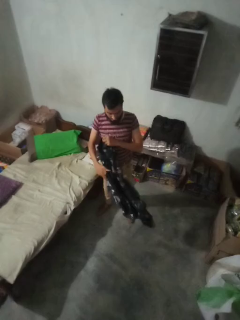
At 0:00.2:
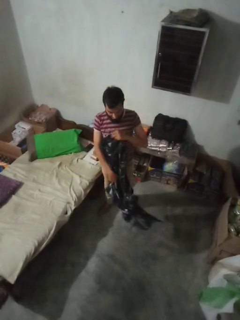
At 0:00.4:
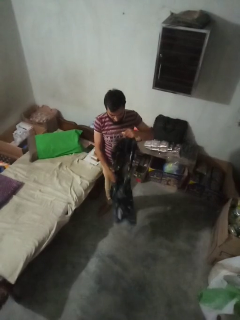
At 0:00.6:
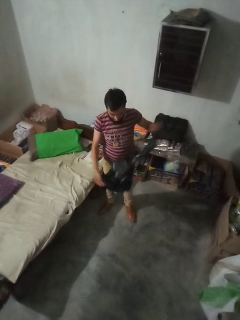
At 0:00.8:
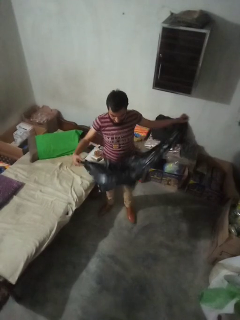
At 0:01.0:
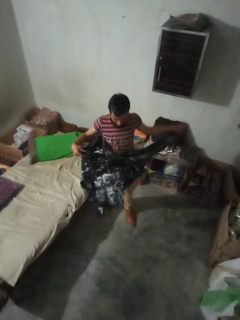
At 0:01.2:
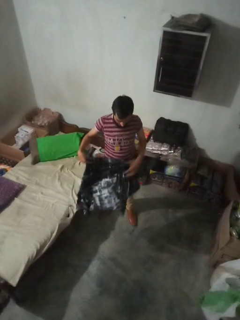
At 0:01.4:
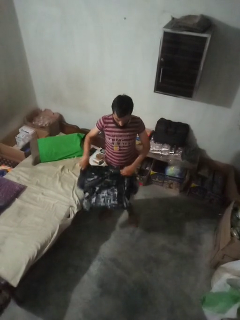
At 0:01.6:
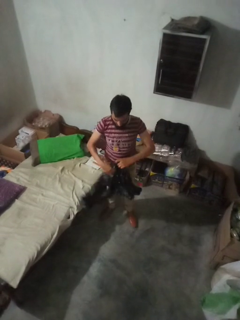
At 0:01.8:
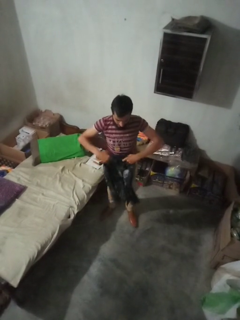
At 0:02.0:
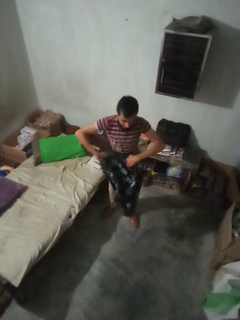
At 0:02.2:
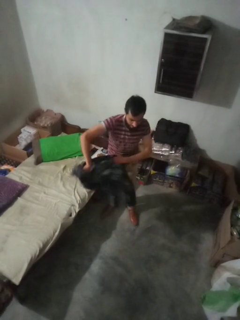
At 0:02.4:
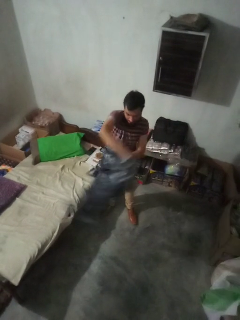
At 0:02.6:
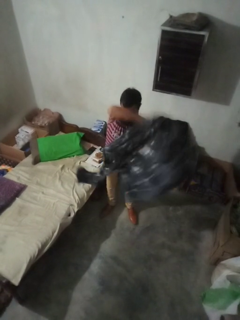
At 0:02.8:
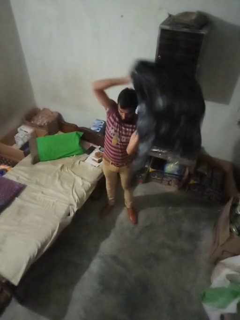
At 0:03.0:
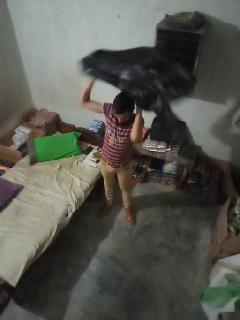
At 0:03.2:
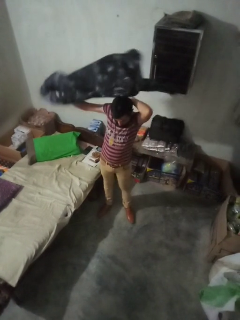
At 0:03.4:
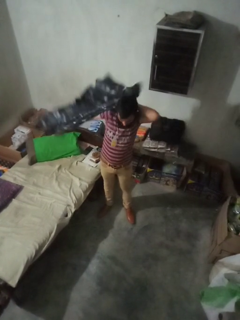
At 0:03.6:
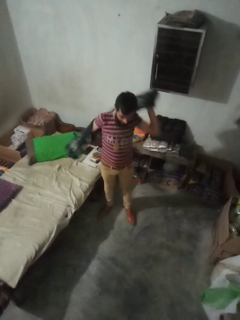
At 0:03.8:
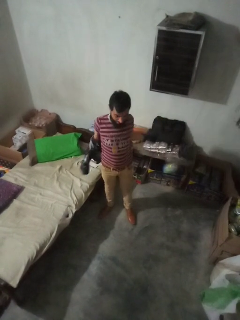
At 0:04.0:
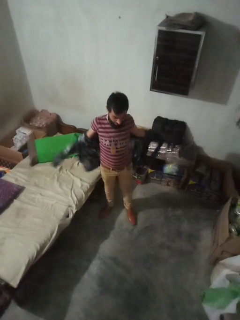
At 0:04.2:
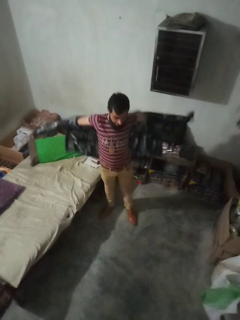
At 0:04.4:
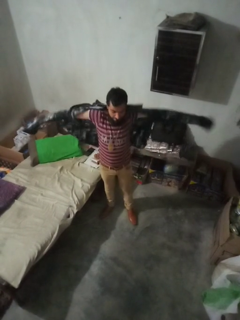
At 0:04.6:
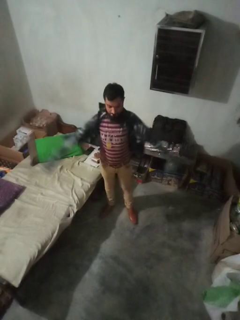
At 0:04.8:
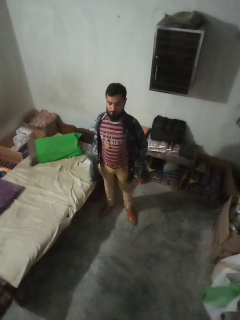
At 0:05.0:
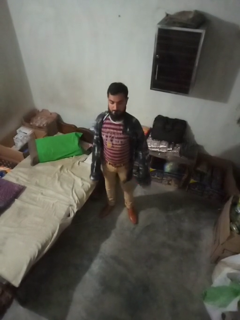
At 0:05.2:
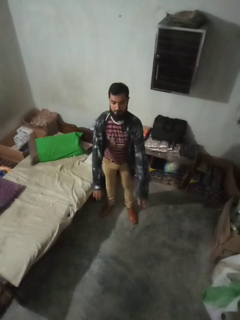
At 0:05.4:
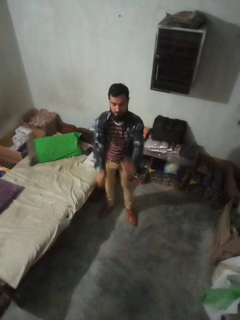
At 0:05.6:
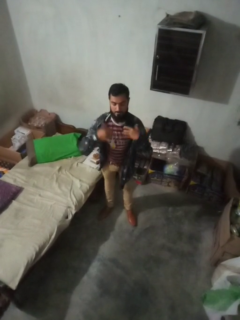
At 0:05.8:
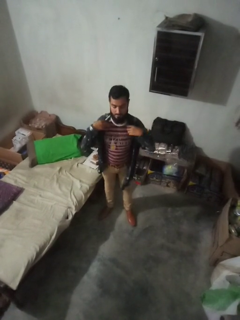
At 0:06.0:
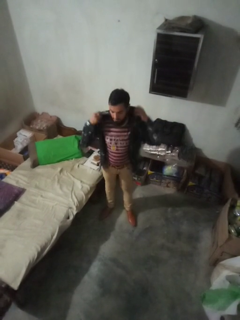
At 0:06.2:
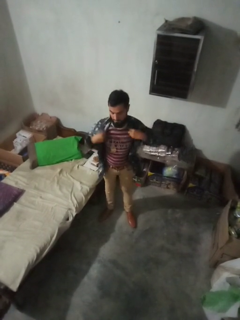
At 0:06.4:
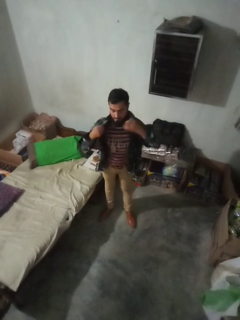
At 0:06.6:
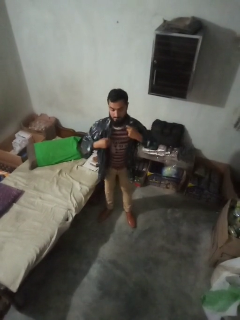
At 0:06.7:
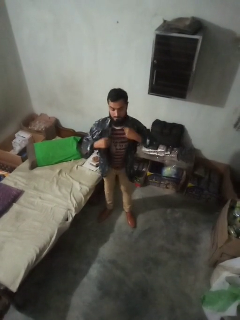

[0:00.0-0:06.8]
person puts on shirt

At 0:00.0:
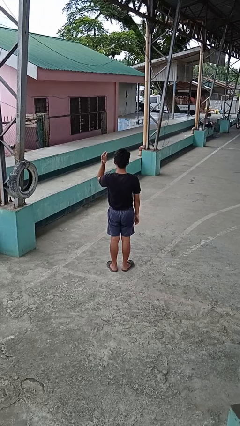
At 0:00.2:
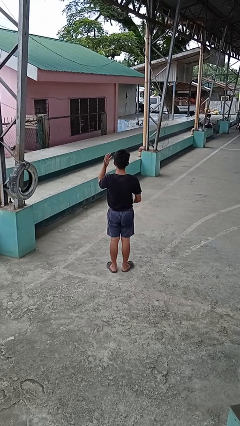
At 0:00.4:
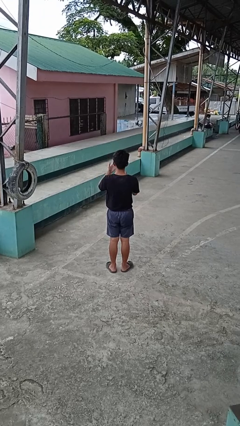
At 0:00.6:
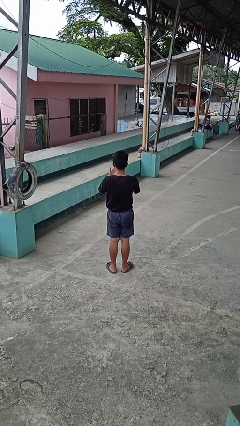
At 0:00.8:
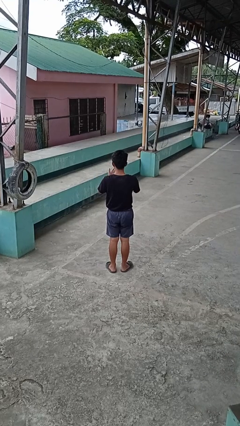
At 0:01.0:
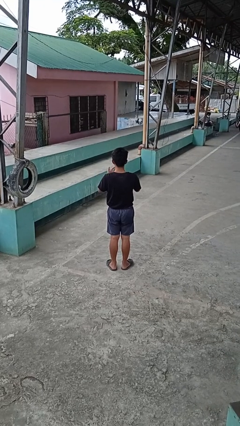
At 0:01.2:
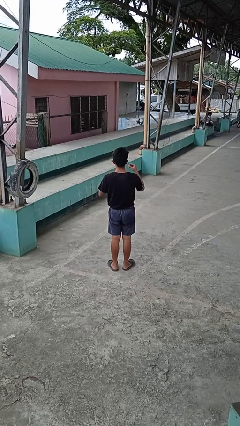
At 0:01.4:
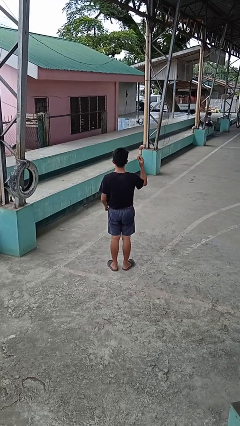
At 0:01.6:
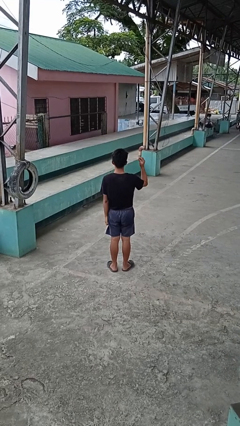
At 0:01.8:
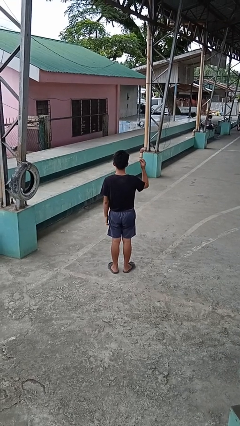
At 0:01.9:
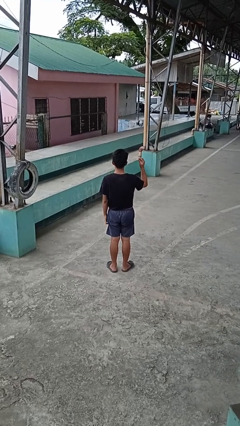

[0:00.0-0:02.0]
person takes off ring

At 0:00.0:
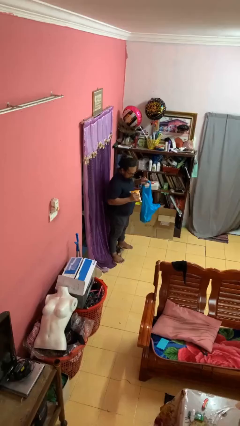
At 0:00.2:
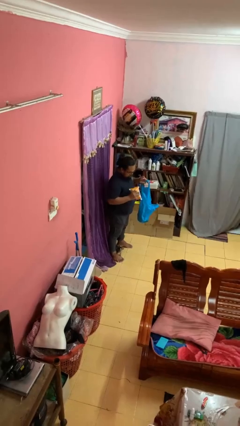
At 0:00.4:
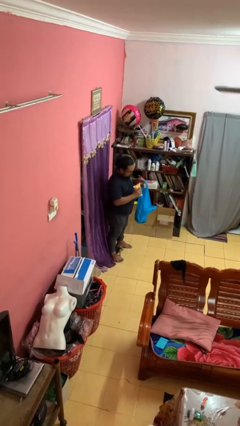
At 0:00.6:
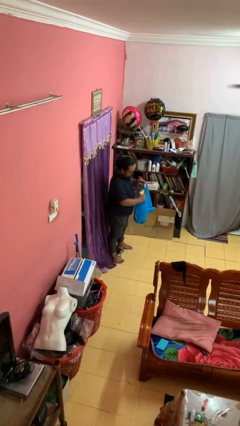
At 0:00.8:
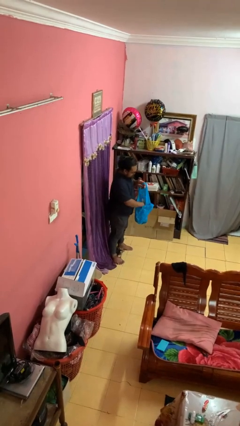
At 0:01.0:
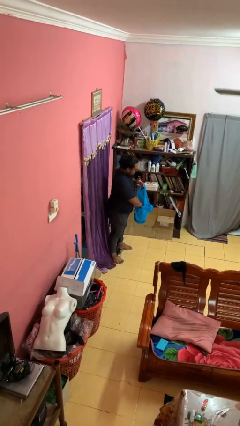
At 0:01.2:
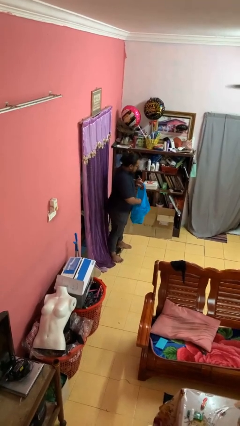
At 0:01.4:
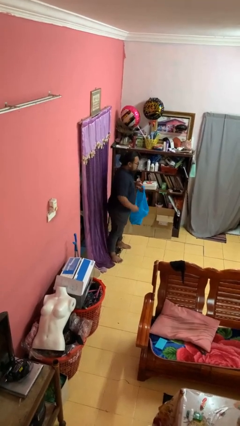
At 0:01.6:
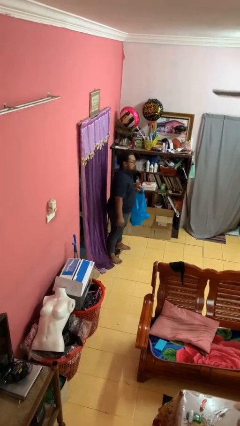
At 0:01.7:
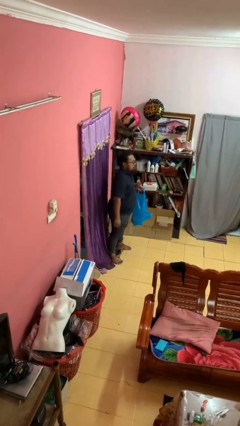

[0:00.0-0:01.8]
person puts object into bag

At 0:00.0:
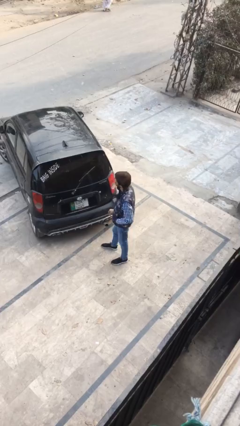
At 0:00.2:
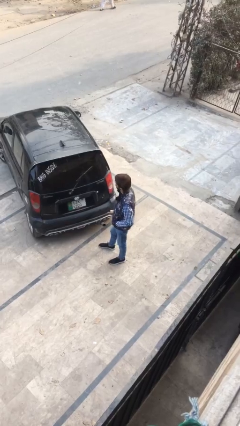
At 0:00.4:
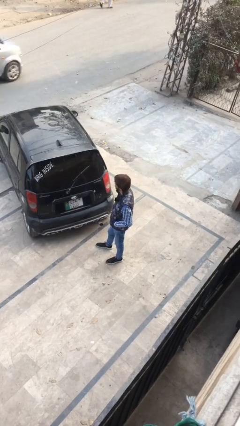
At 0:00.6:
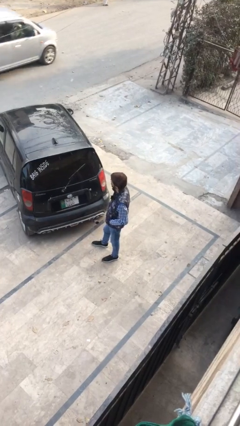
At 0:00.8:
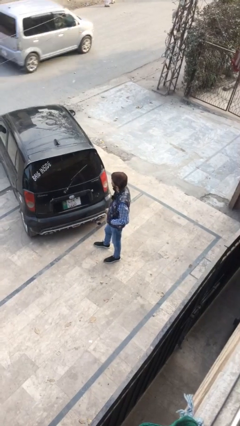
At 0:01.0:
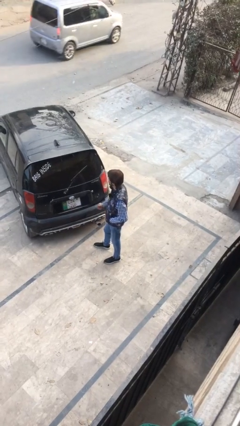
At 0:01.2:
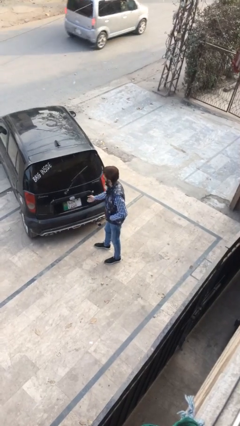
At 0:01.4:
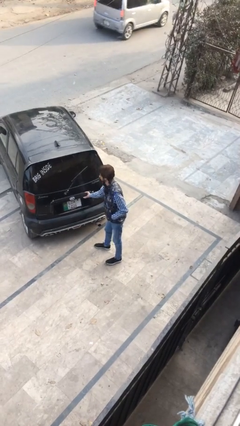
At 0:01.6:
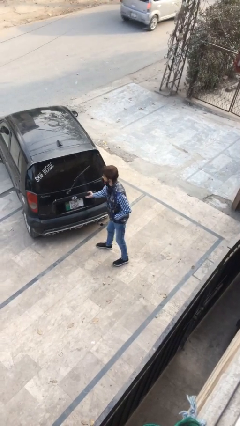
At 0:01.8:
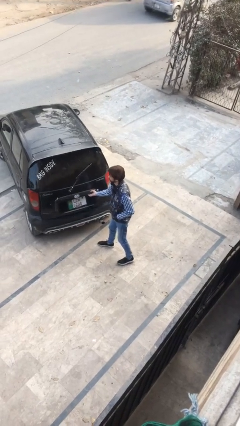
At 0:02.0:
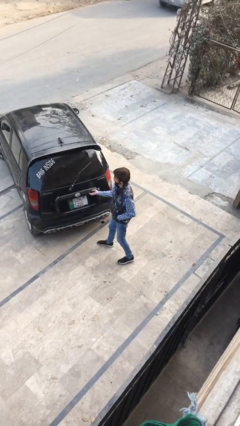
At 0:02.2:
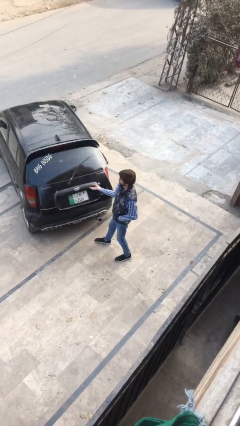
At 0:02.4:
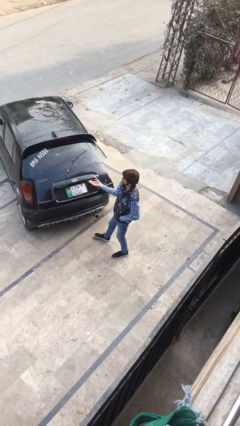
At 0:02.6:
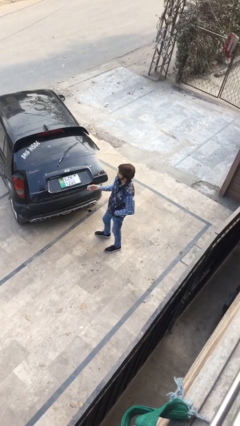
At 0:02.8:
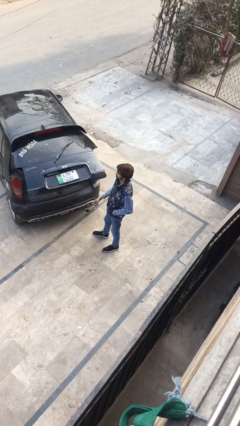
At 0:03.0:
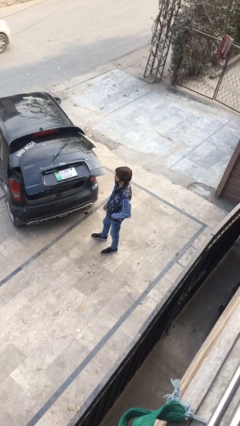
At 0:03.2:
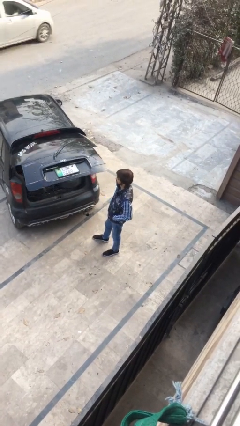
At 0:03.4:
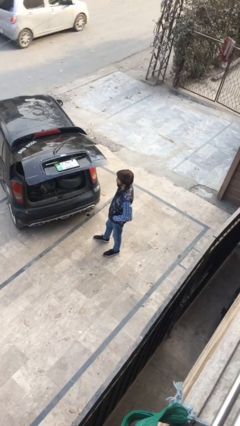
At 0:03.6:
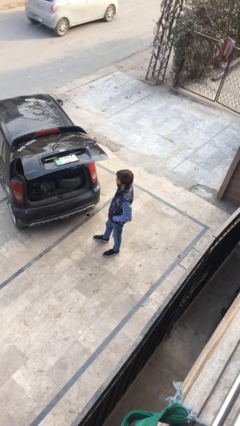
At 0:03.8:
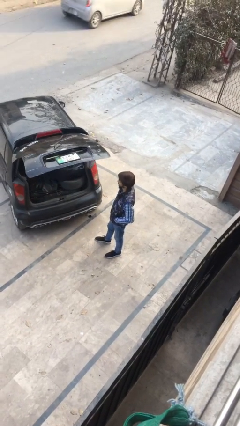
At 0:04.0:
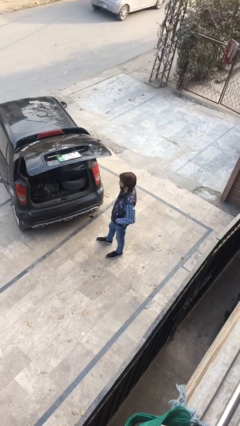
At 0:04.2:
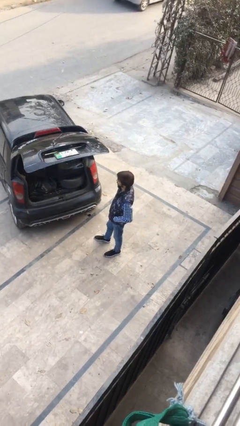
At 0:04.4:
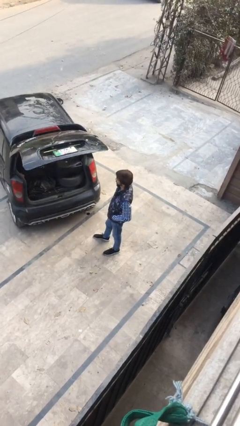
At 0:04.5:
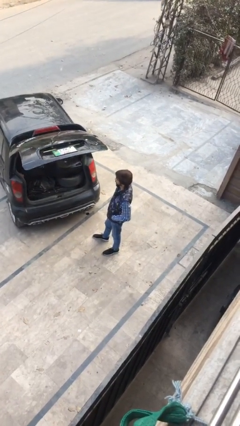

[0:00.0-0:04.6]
person opens car trunk

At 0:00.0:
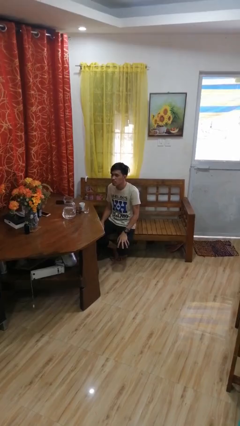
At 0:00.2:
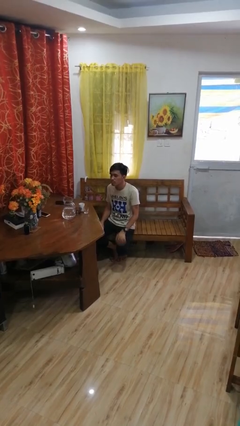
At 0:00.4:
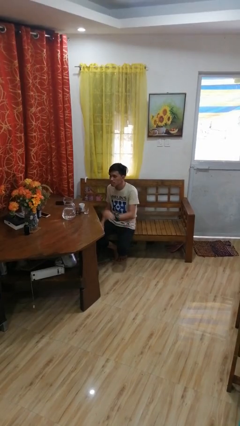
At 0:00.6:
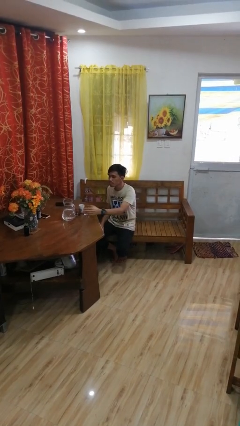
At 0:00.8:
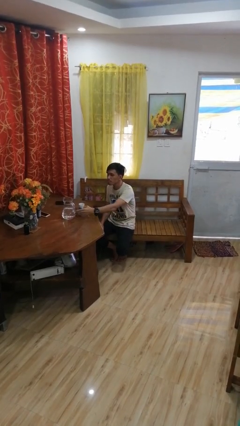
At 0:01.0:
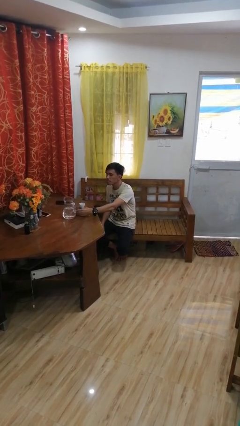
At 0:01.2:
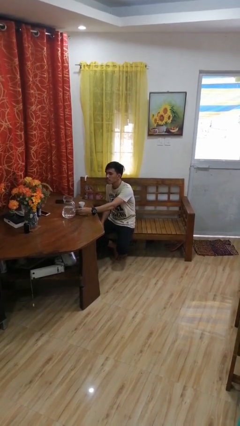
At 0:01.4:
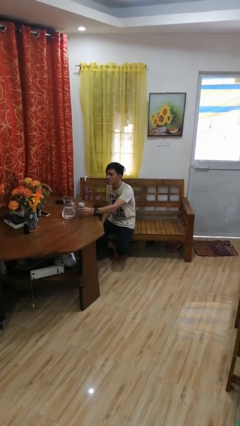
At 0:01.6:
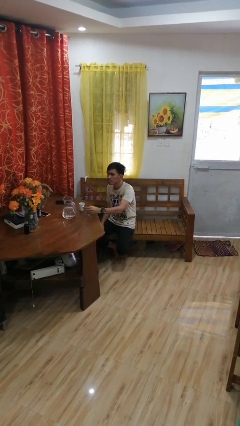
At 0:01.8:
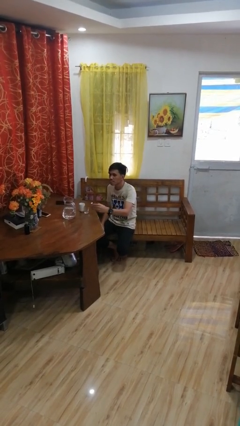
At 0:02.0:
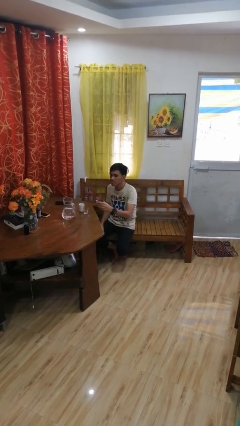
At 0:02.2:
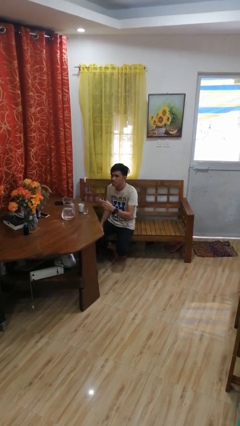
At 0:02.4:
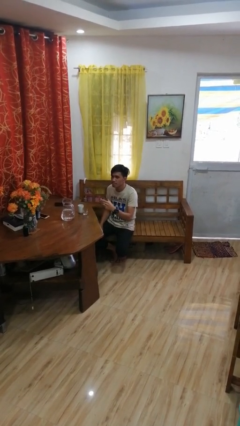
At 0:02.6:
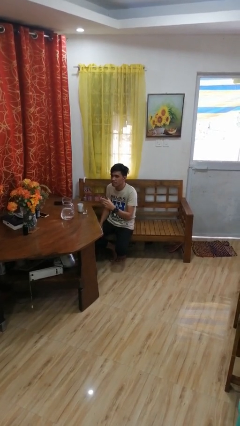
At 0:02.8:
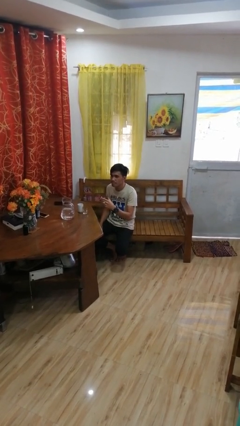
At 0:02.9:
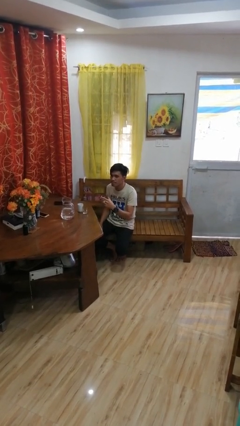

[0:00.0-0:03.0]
person picks up object from table

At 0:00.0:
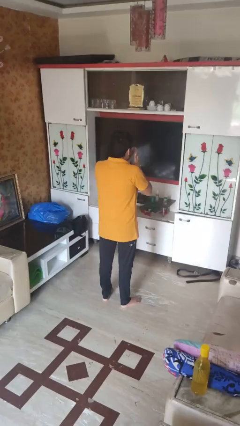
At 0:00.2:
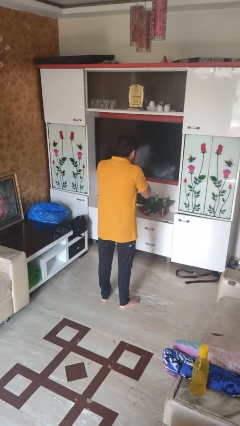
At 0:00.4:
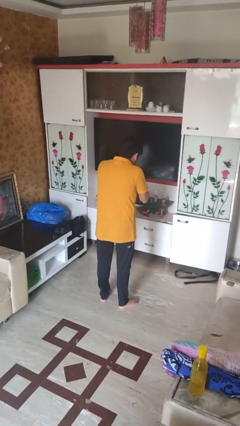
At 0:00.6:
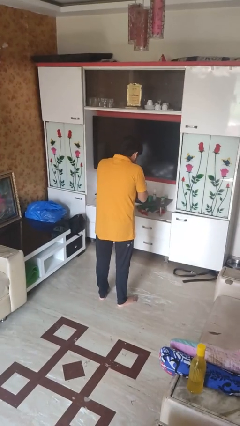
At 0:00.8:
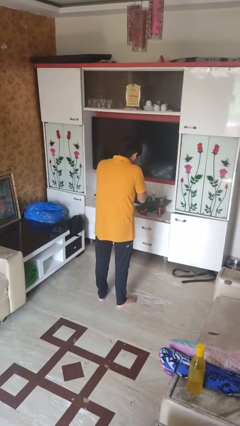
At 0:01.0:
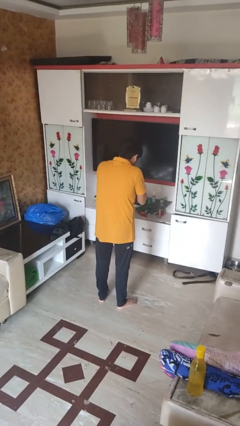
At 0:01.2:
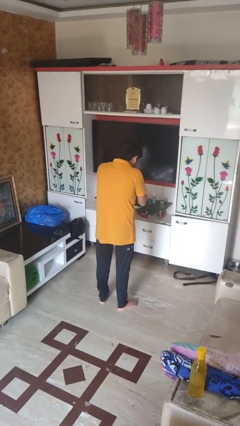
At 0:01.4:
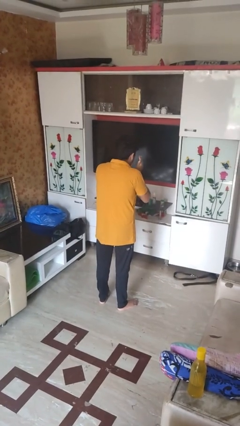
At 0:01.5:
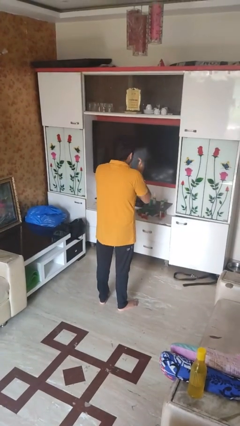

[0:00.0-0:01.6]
person sneezes into hand
